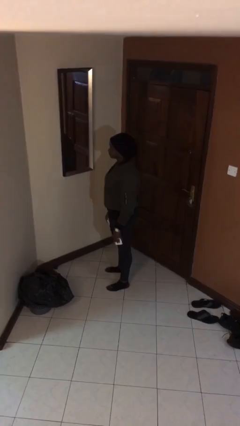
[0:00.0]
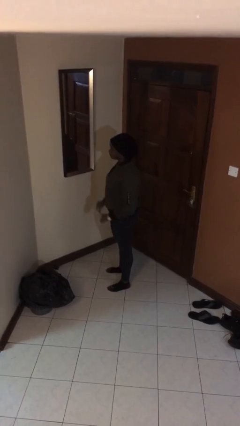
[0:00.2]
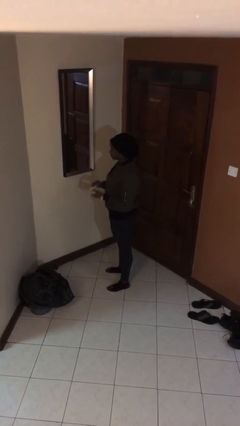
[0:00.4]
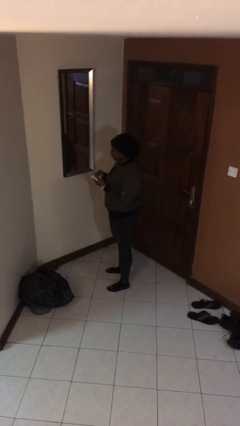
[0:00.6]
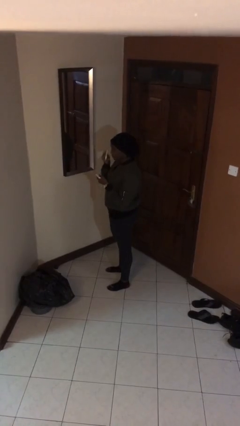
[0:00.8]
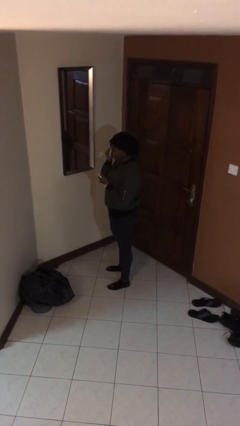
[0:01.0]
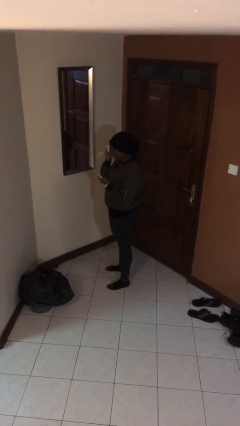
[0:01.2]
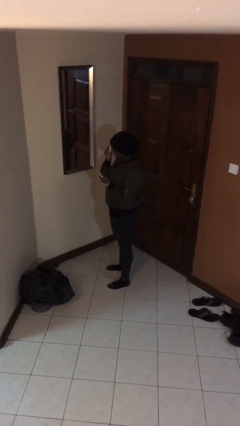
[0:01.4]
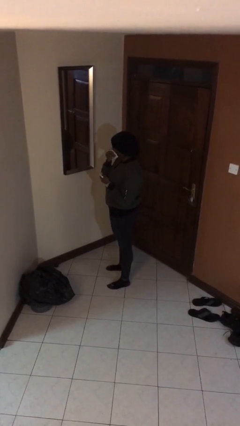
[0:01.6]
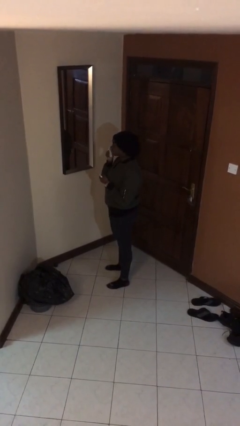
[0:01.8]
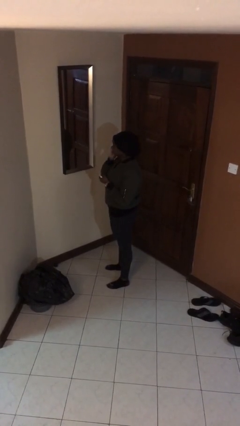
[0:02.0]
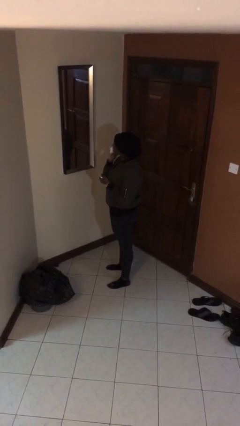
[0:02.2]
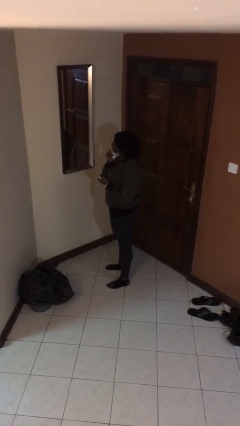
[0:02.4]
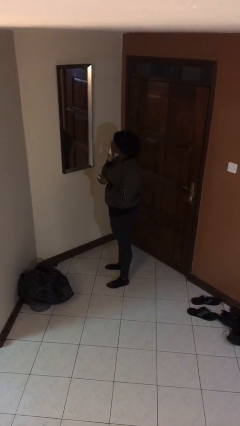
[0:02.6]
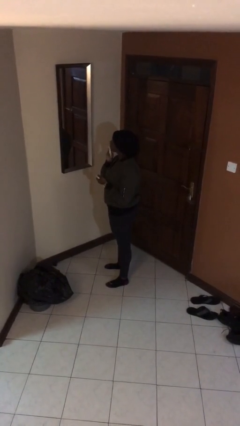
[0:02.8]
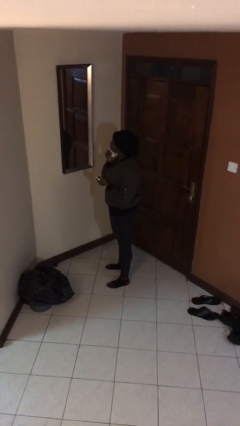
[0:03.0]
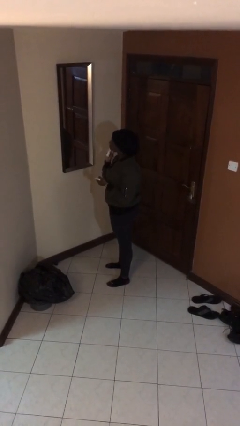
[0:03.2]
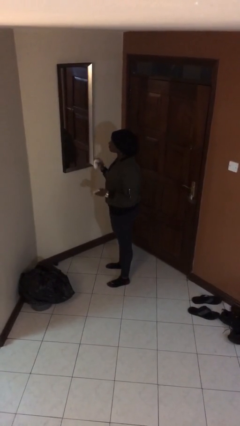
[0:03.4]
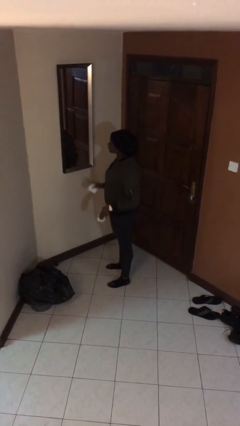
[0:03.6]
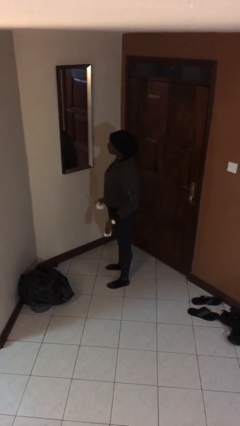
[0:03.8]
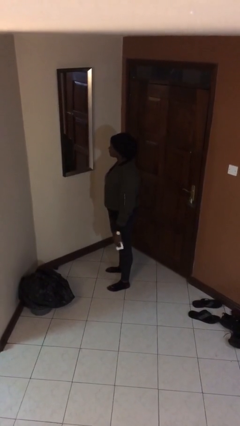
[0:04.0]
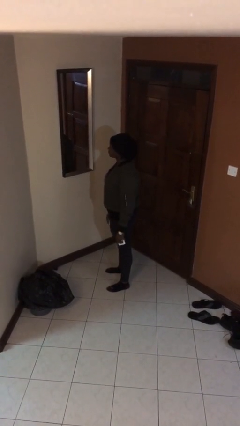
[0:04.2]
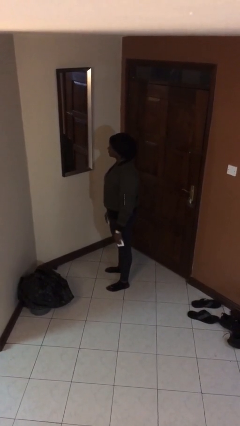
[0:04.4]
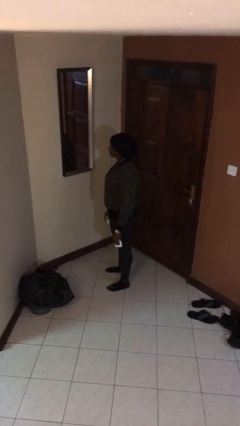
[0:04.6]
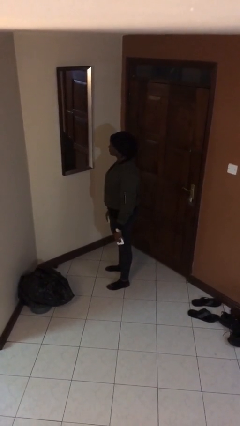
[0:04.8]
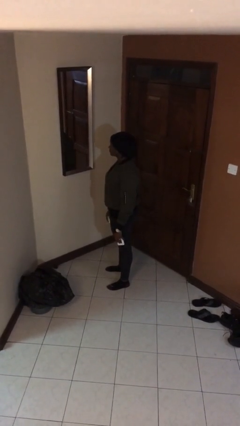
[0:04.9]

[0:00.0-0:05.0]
person applies foundation makeup

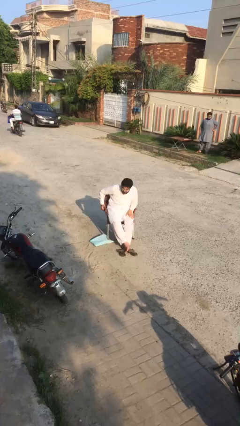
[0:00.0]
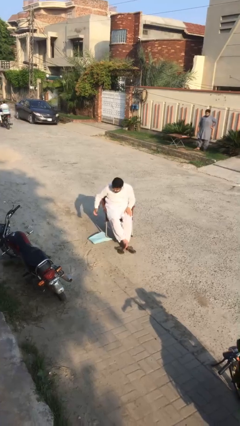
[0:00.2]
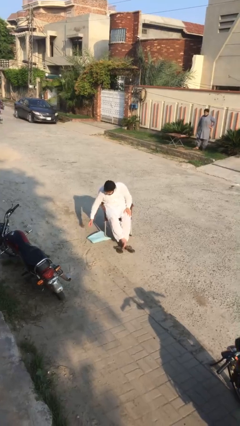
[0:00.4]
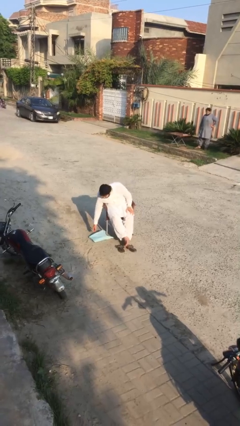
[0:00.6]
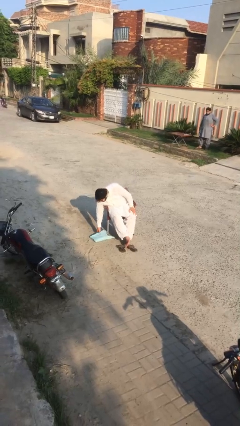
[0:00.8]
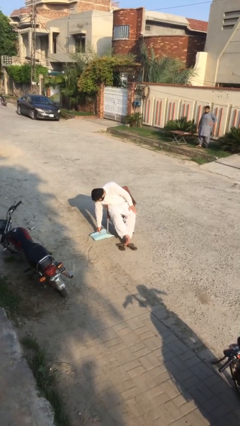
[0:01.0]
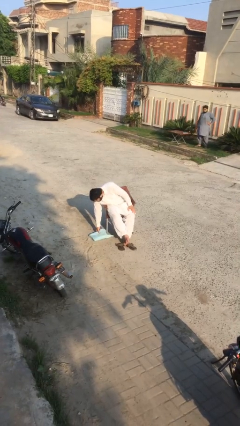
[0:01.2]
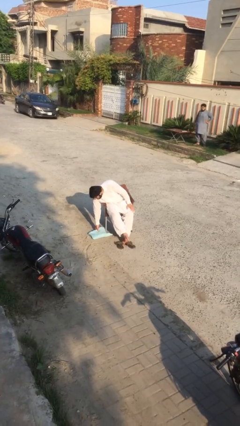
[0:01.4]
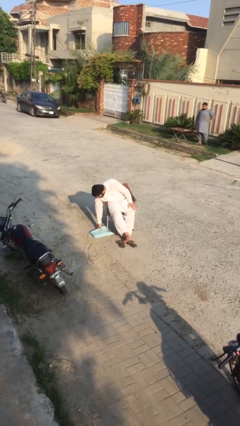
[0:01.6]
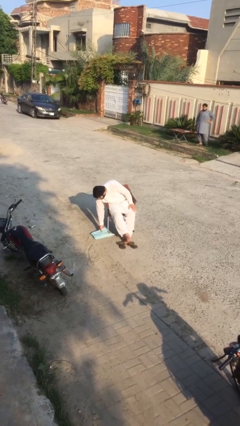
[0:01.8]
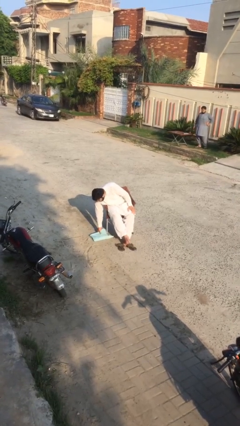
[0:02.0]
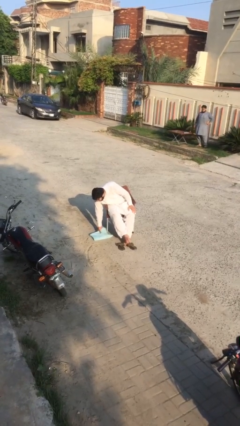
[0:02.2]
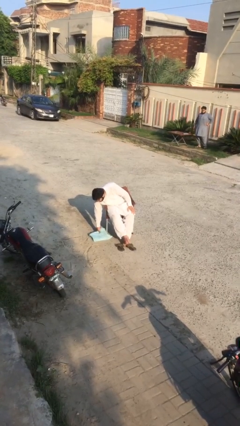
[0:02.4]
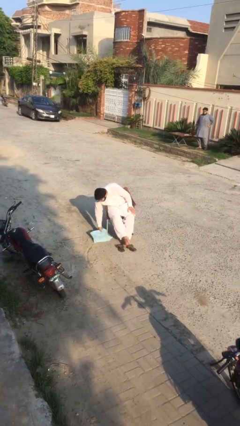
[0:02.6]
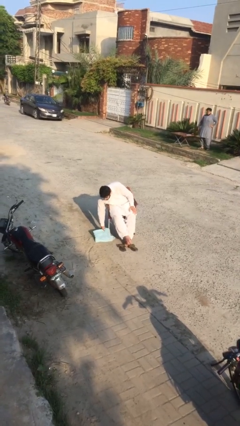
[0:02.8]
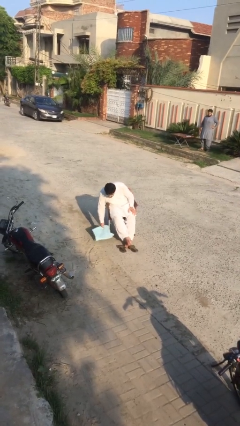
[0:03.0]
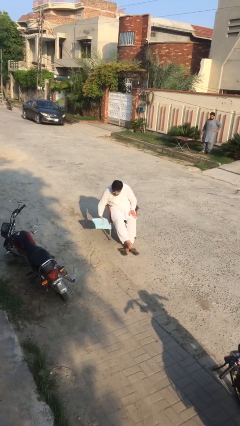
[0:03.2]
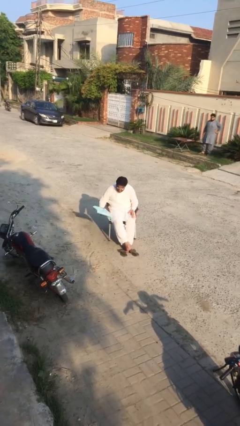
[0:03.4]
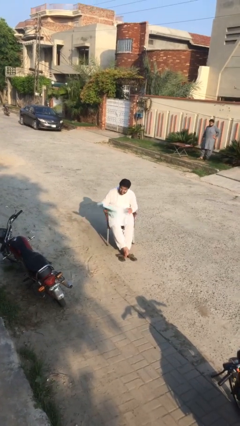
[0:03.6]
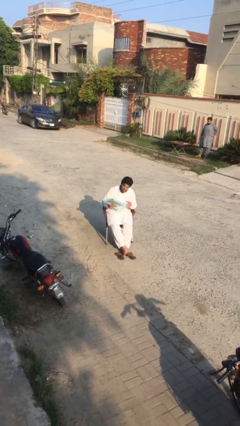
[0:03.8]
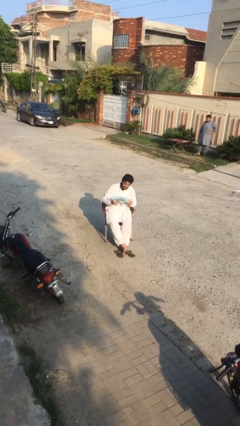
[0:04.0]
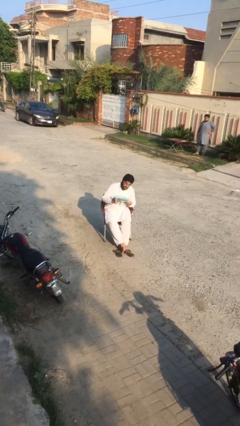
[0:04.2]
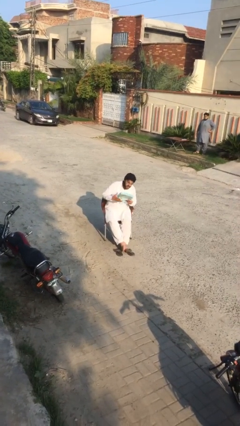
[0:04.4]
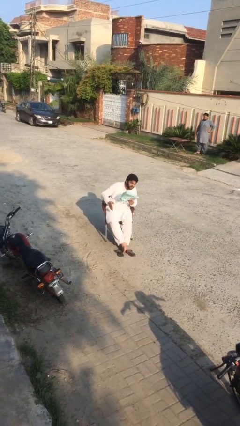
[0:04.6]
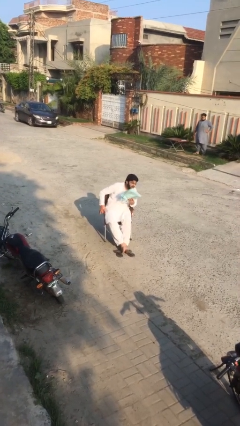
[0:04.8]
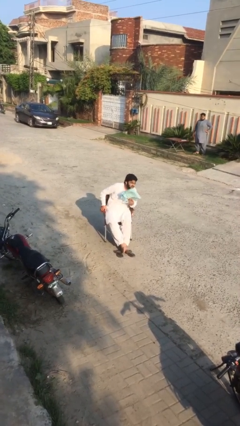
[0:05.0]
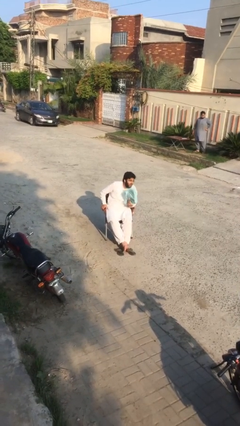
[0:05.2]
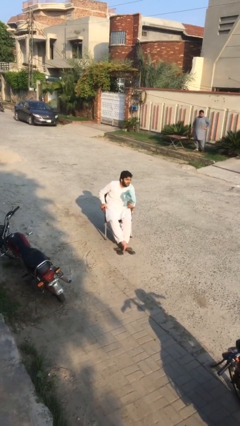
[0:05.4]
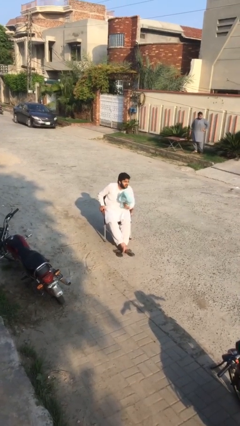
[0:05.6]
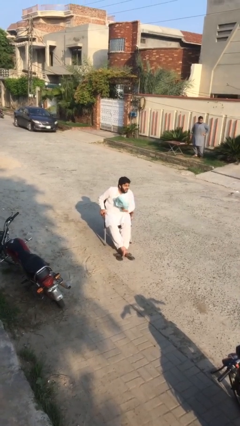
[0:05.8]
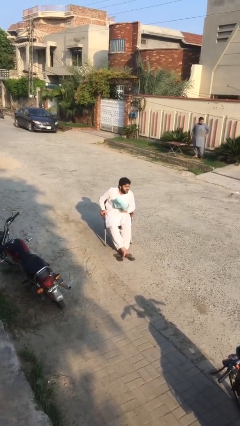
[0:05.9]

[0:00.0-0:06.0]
person picks up object from floor

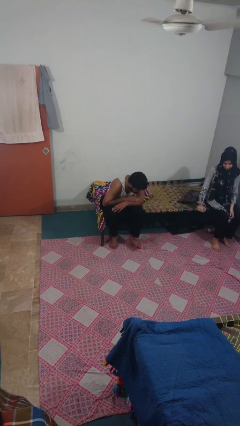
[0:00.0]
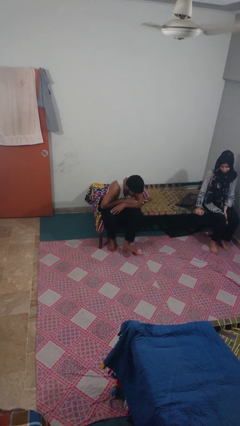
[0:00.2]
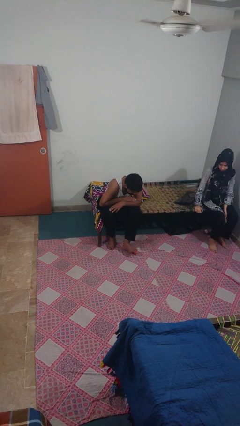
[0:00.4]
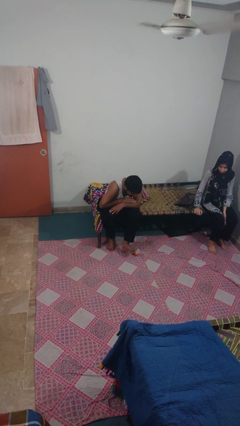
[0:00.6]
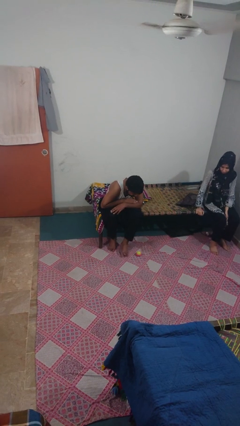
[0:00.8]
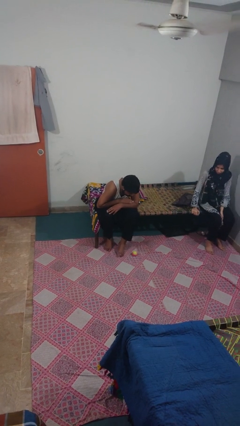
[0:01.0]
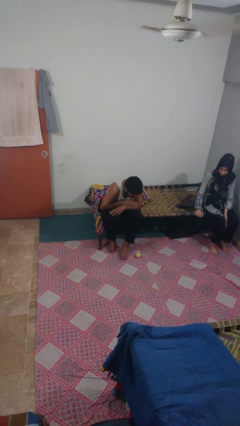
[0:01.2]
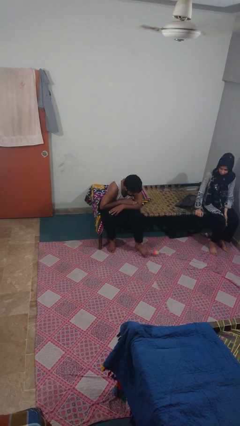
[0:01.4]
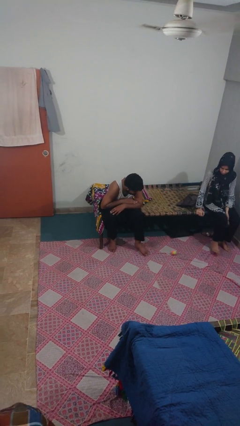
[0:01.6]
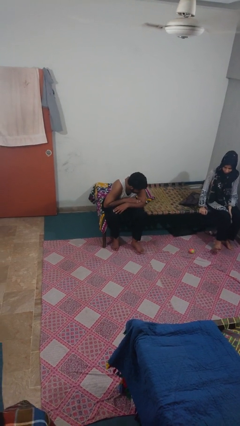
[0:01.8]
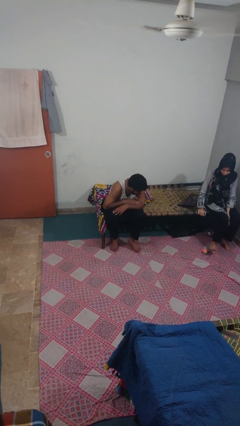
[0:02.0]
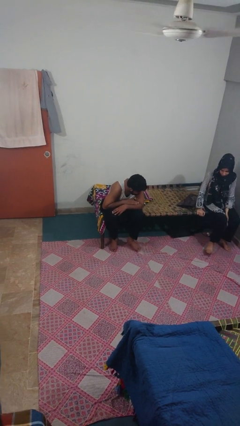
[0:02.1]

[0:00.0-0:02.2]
person kicks object to person

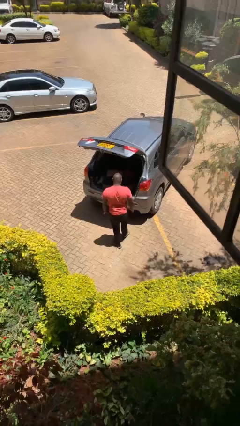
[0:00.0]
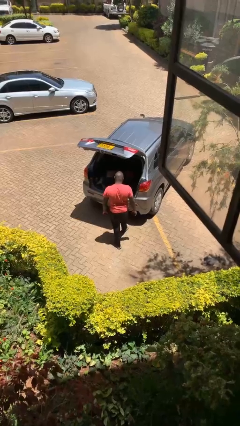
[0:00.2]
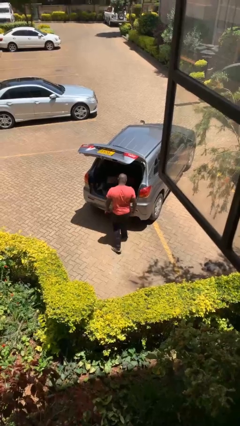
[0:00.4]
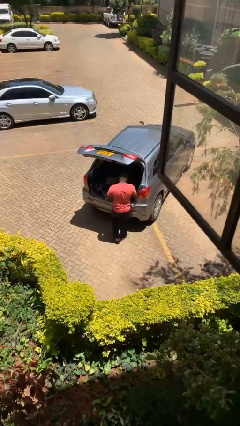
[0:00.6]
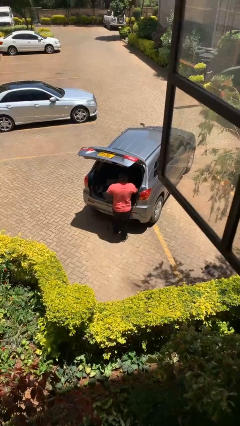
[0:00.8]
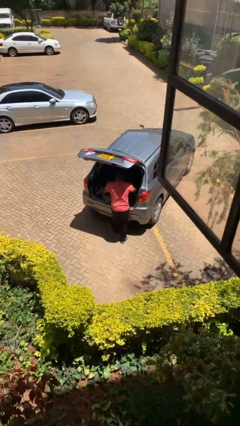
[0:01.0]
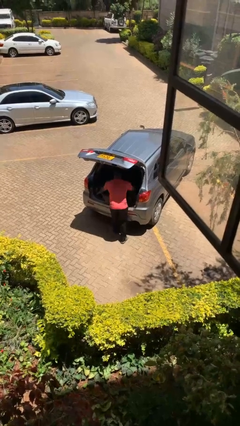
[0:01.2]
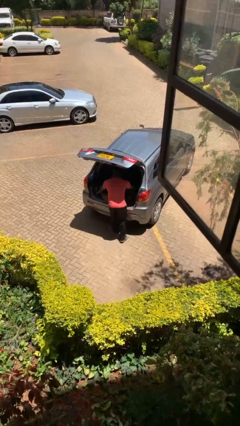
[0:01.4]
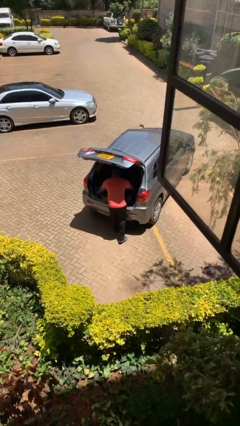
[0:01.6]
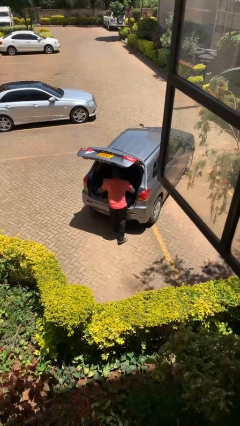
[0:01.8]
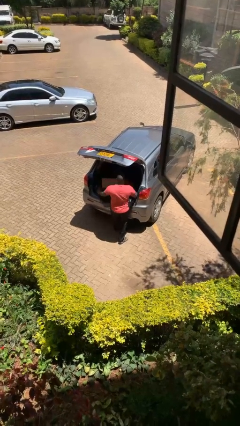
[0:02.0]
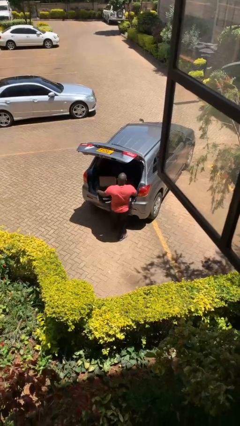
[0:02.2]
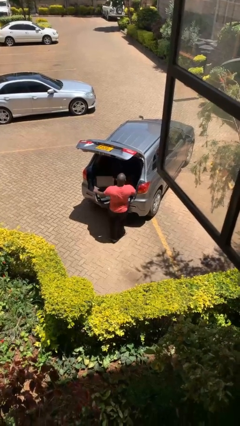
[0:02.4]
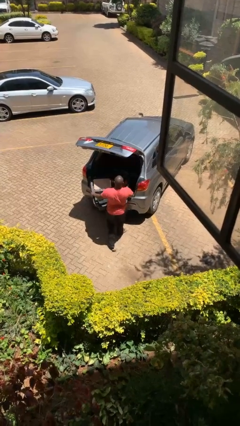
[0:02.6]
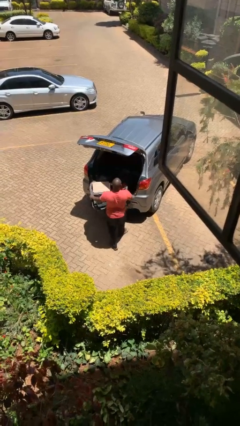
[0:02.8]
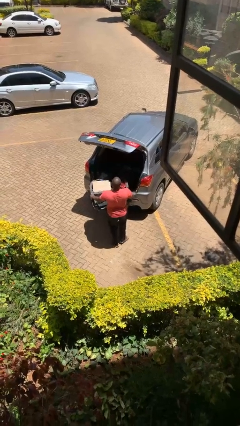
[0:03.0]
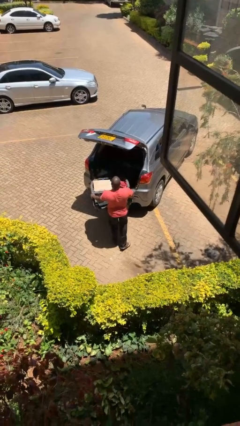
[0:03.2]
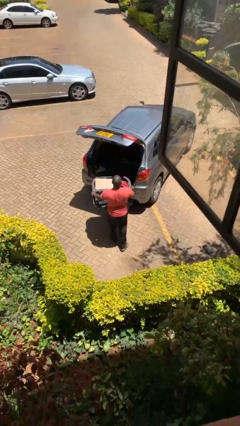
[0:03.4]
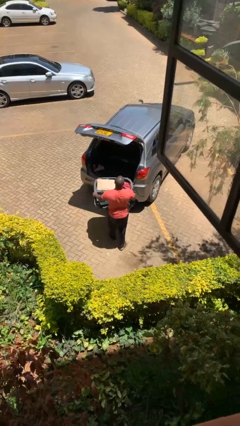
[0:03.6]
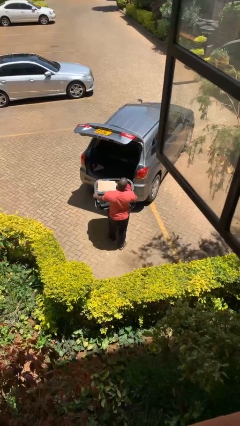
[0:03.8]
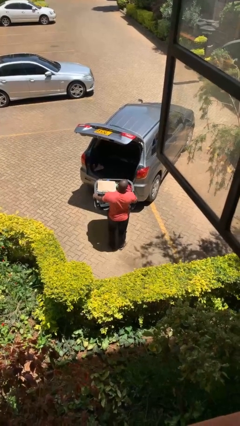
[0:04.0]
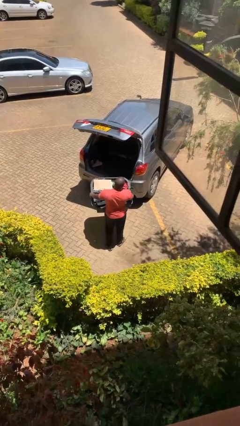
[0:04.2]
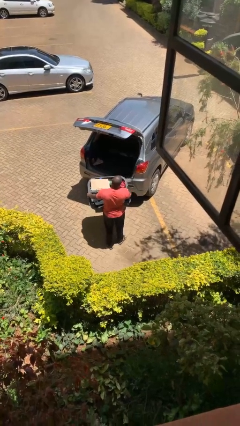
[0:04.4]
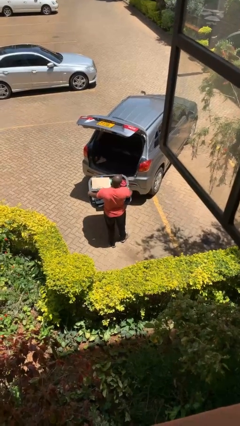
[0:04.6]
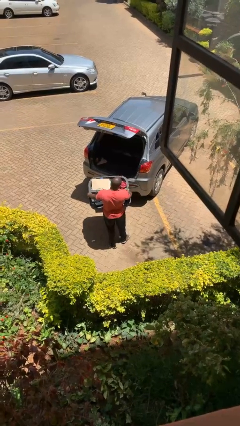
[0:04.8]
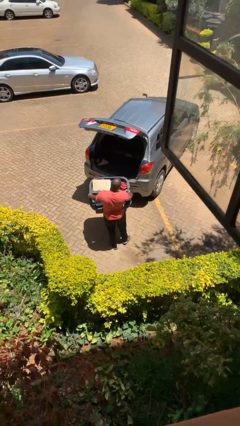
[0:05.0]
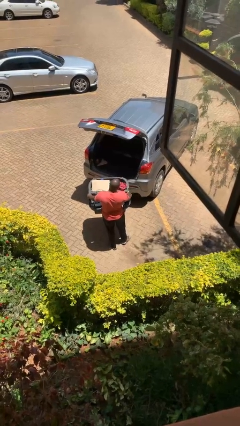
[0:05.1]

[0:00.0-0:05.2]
person unloads car
